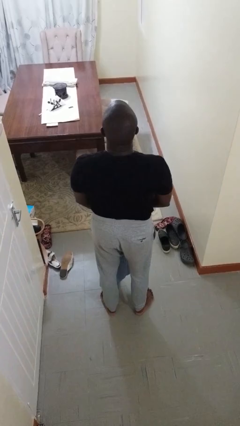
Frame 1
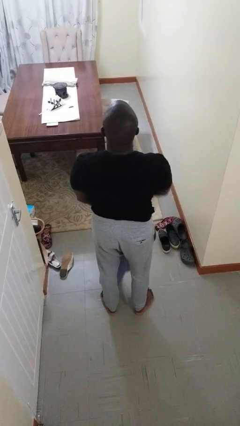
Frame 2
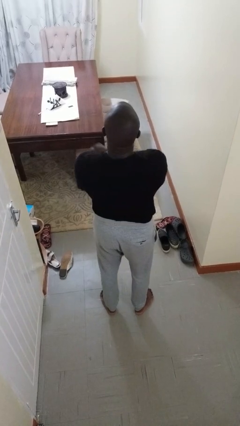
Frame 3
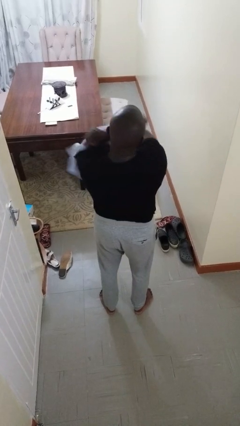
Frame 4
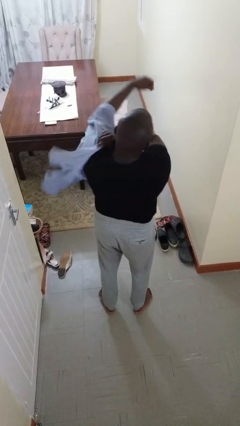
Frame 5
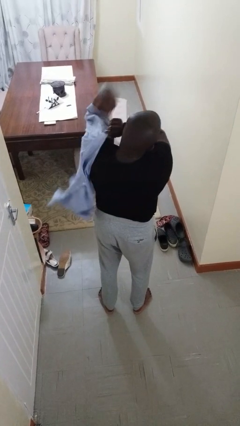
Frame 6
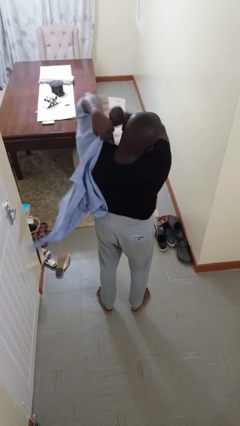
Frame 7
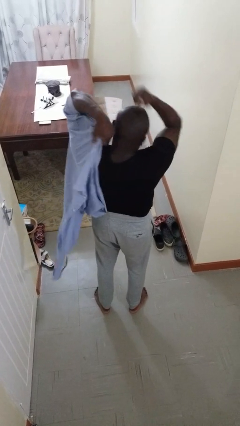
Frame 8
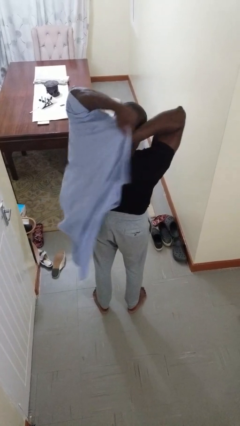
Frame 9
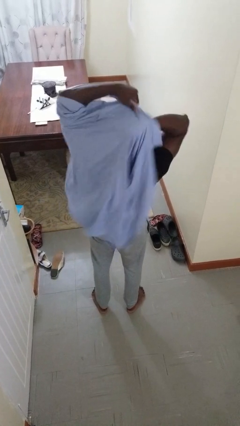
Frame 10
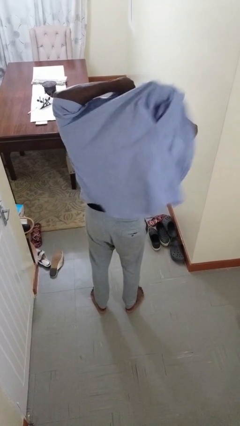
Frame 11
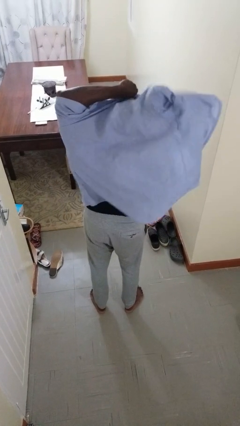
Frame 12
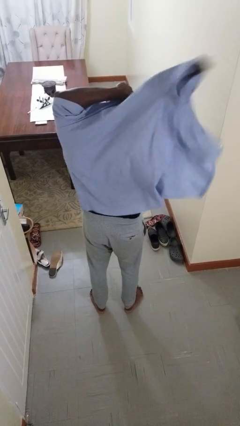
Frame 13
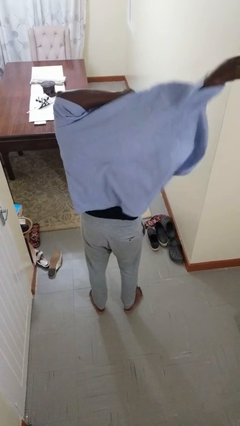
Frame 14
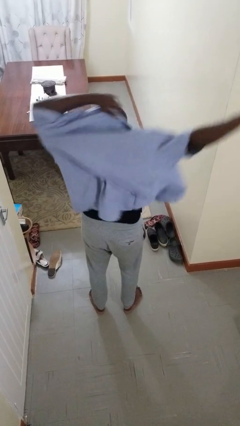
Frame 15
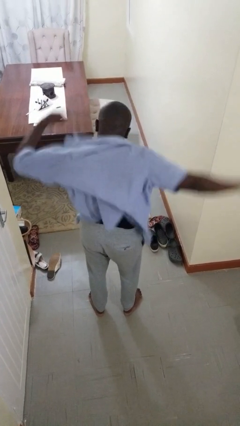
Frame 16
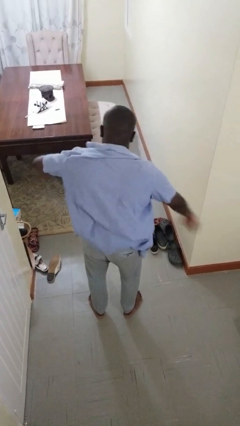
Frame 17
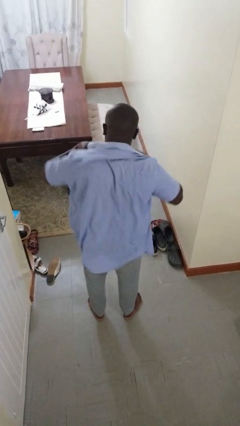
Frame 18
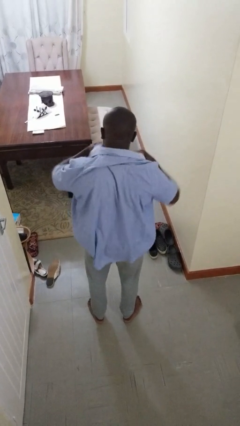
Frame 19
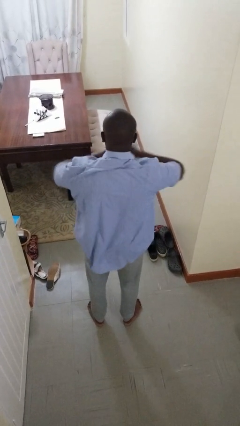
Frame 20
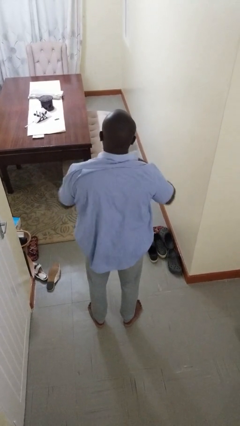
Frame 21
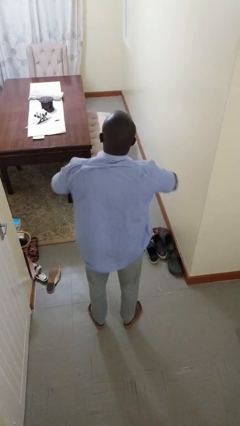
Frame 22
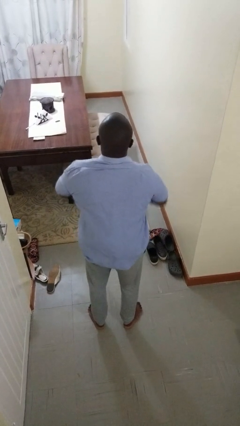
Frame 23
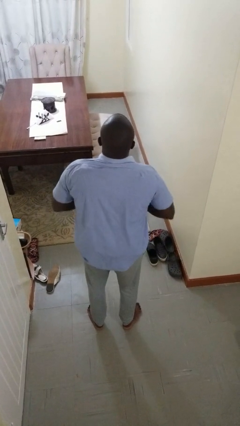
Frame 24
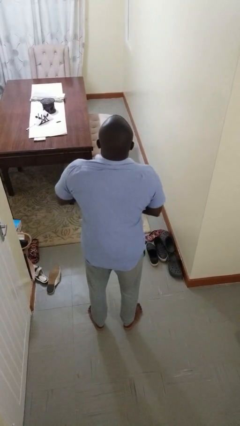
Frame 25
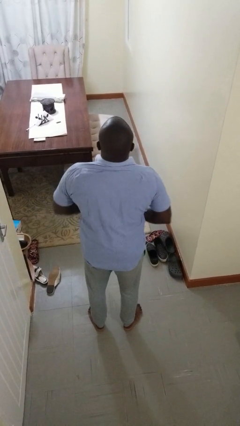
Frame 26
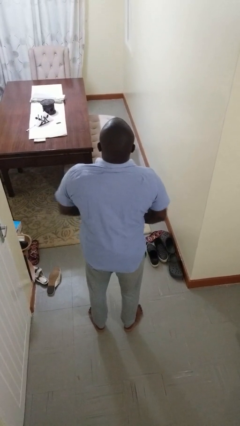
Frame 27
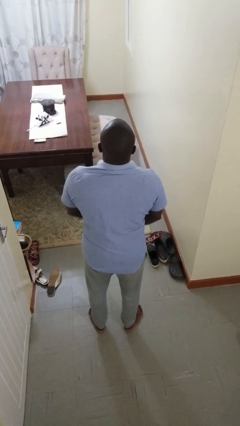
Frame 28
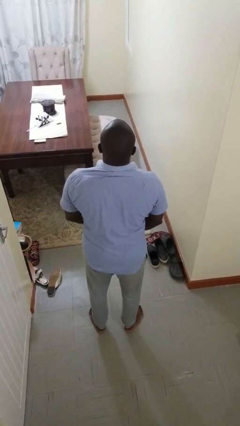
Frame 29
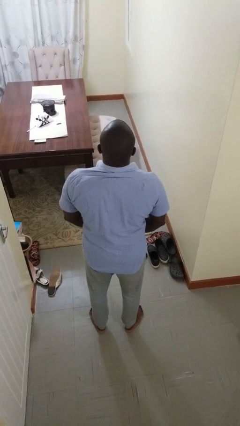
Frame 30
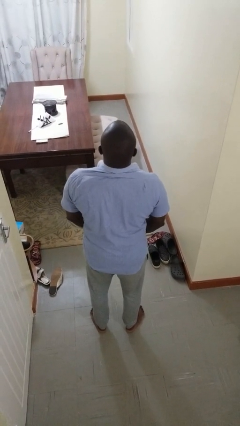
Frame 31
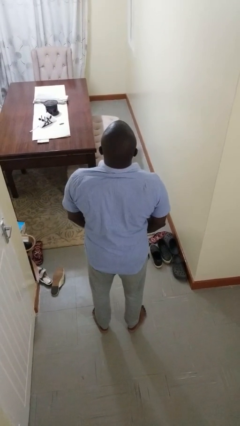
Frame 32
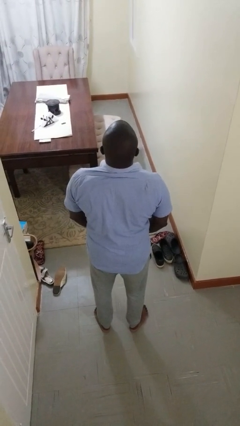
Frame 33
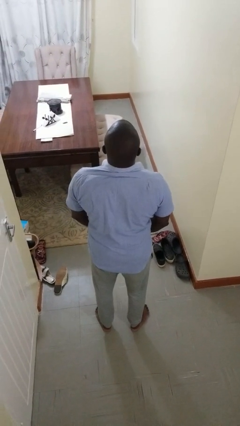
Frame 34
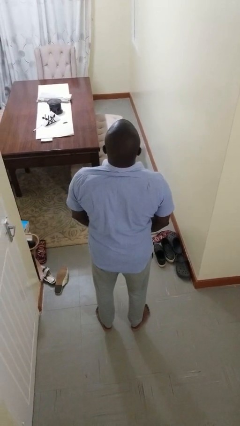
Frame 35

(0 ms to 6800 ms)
person puts on shirt

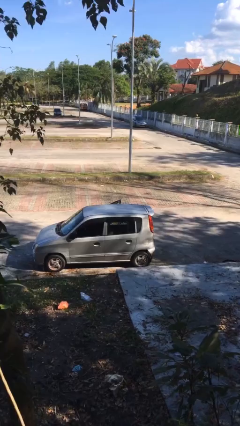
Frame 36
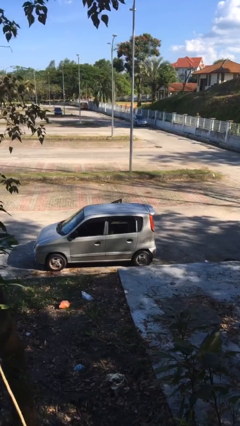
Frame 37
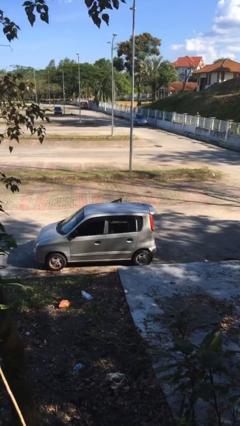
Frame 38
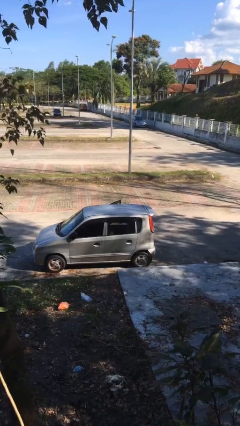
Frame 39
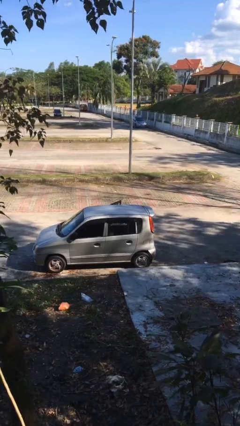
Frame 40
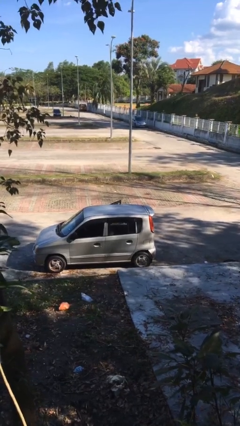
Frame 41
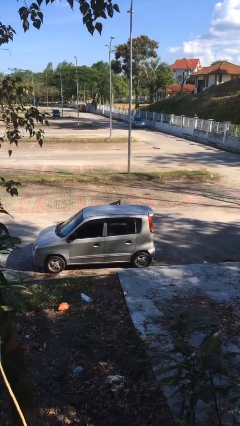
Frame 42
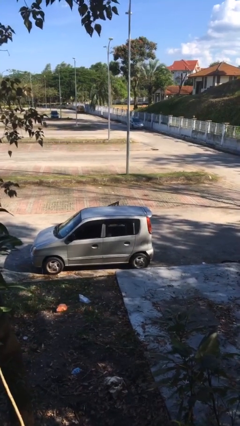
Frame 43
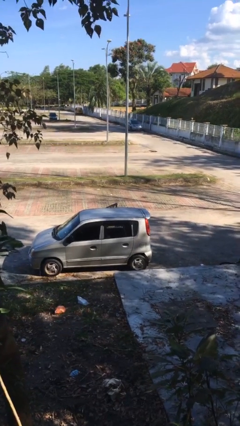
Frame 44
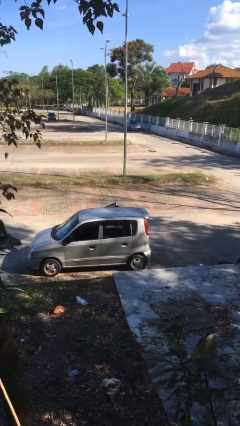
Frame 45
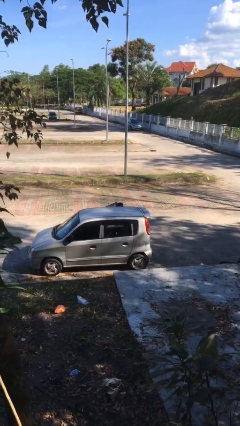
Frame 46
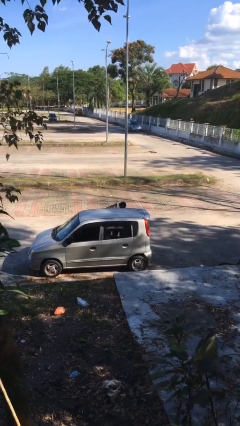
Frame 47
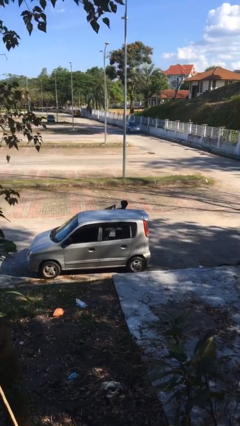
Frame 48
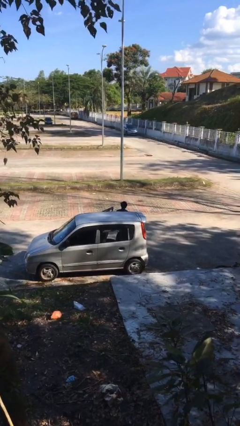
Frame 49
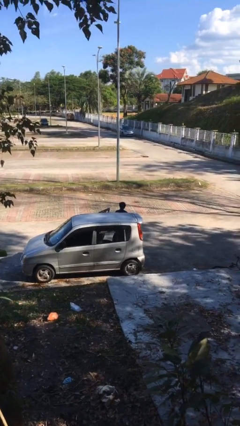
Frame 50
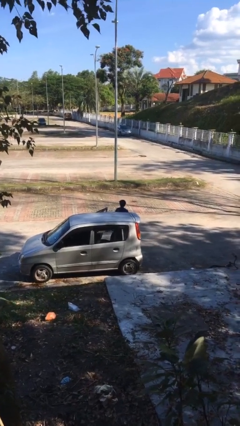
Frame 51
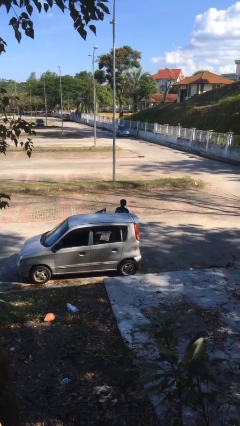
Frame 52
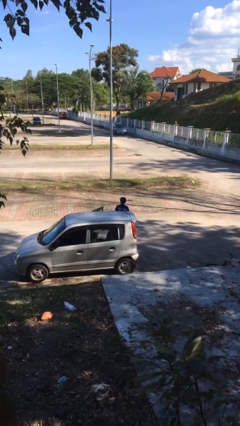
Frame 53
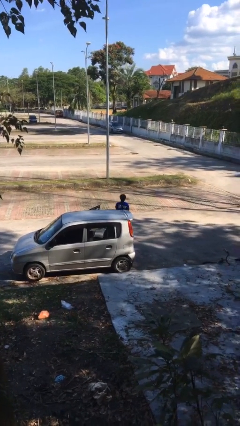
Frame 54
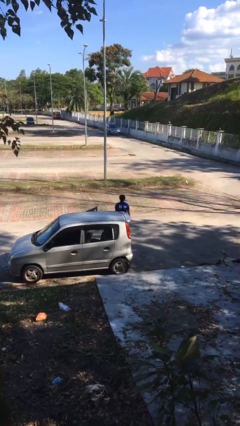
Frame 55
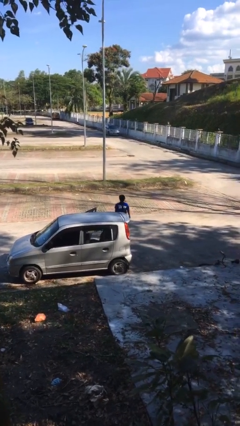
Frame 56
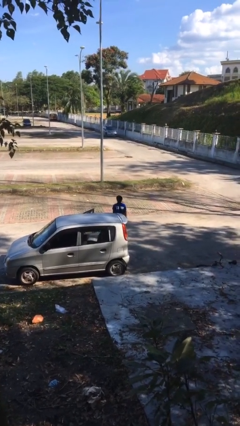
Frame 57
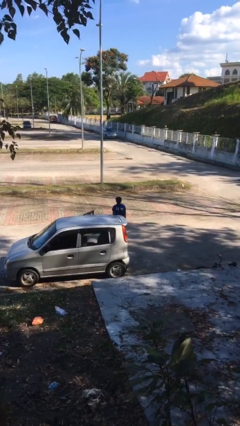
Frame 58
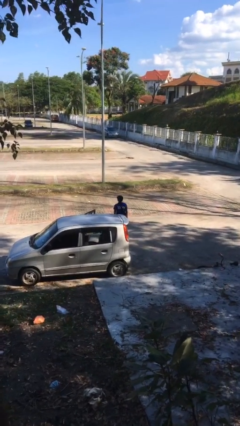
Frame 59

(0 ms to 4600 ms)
person exits car

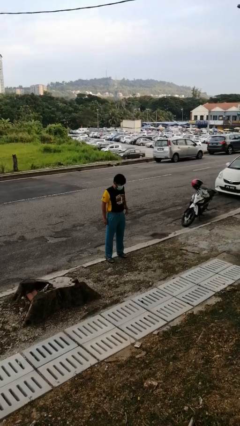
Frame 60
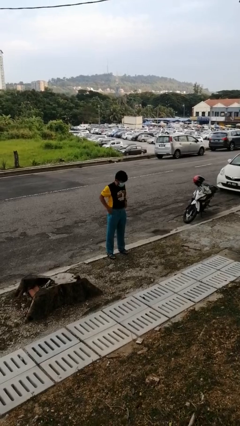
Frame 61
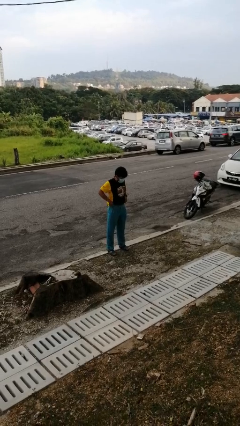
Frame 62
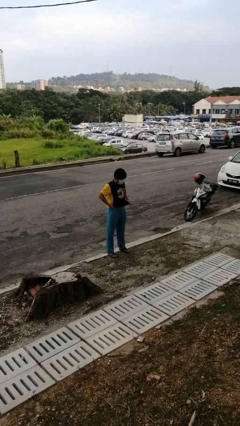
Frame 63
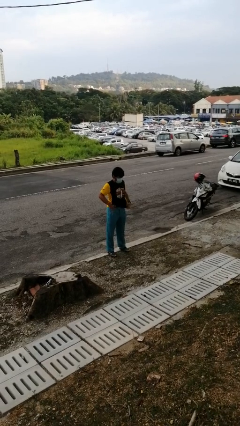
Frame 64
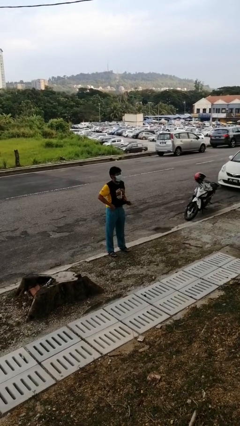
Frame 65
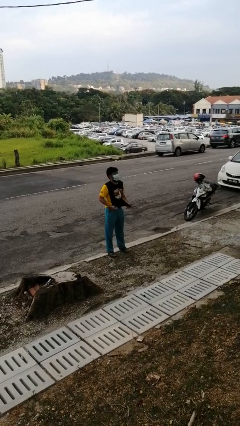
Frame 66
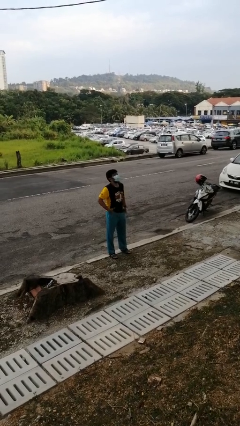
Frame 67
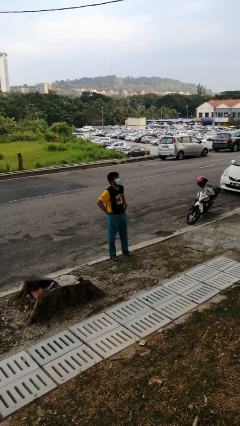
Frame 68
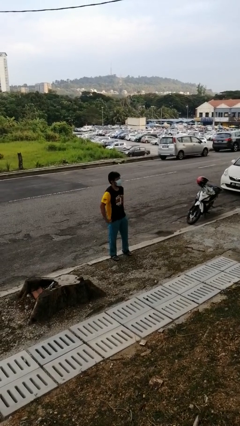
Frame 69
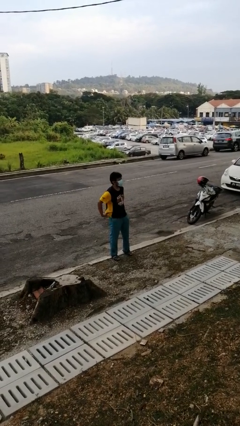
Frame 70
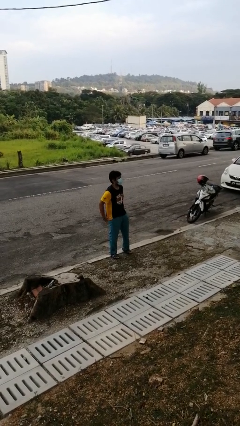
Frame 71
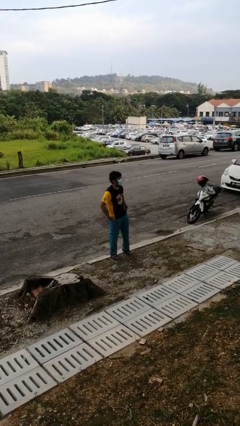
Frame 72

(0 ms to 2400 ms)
person untucks shirt

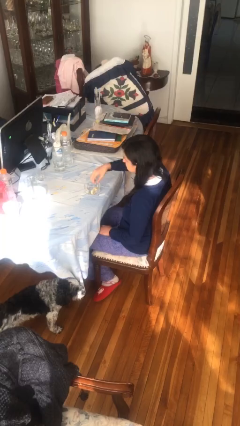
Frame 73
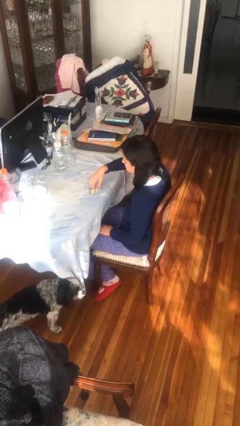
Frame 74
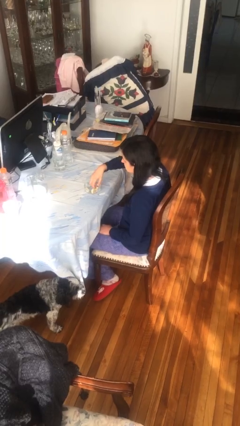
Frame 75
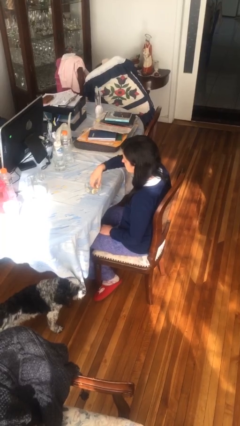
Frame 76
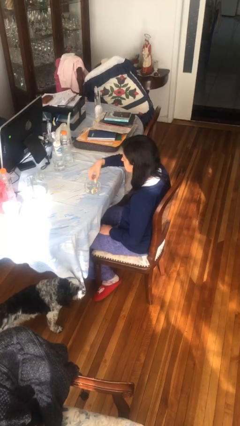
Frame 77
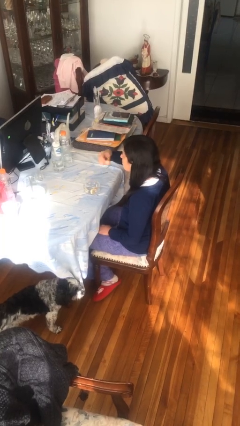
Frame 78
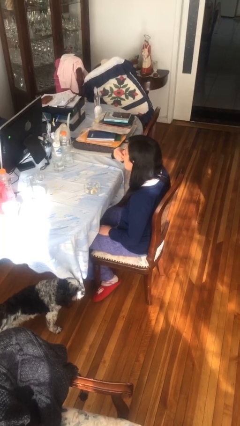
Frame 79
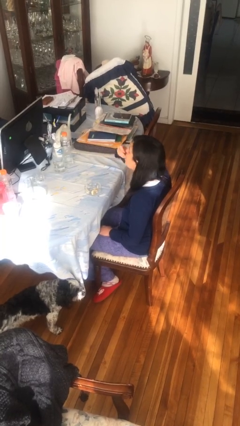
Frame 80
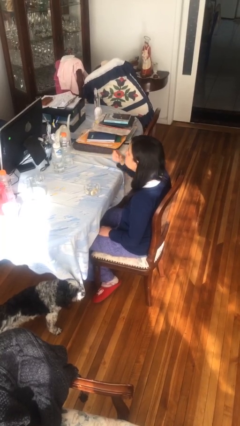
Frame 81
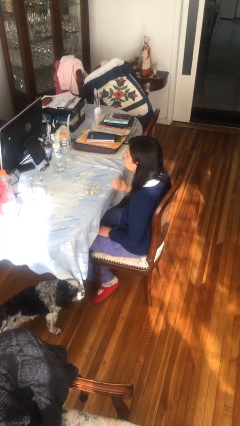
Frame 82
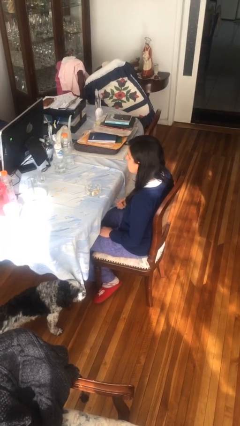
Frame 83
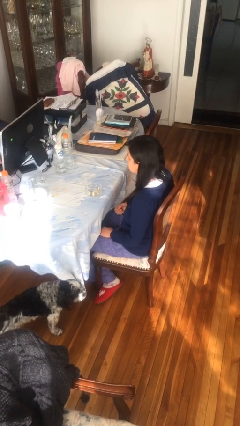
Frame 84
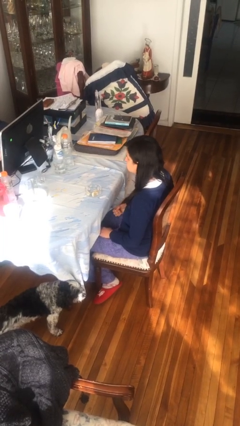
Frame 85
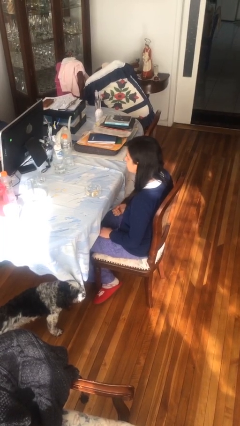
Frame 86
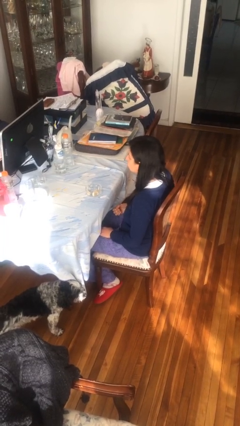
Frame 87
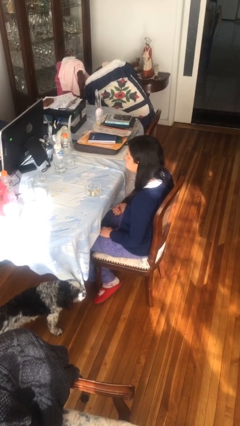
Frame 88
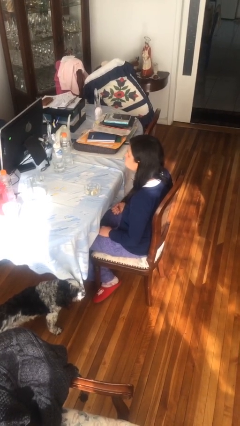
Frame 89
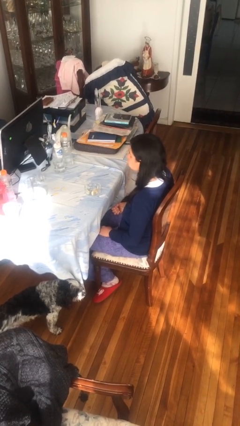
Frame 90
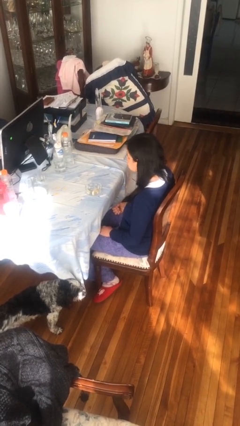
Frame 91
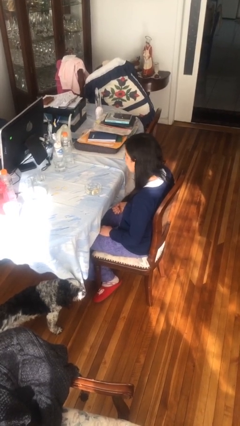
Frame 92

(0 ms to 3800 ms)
person eats with hands
